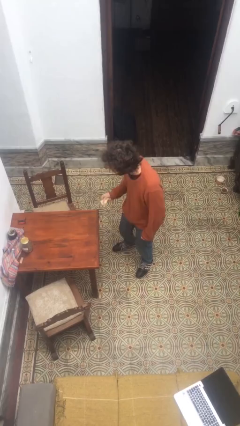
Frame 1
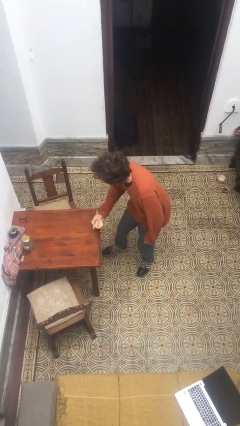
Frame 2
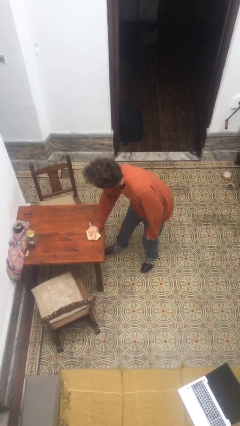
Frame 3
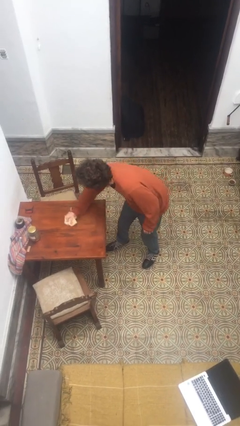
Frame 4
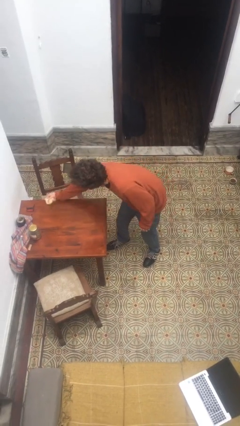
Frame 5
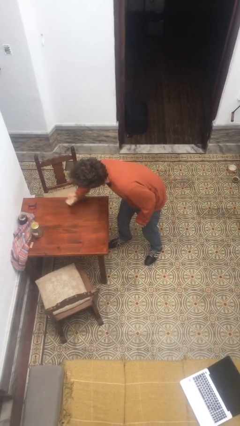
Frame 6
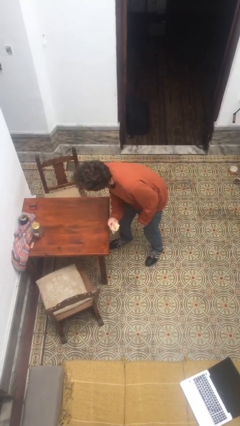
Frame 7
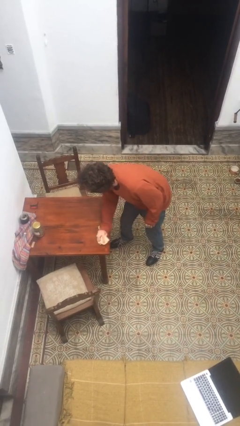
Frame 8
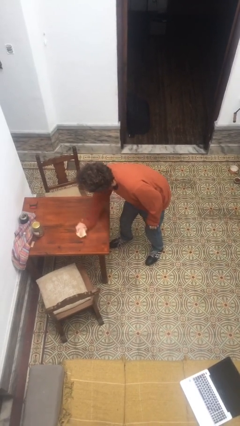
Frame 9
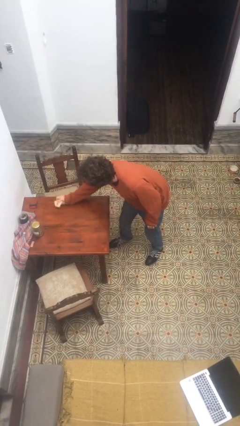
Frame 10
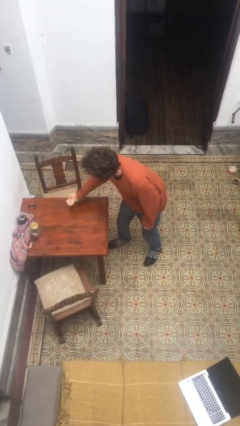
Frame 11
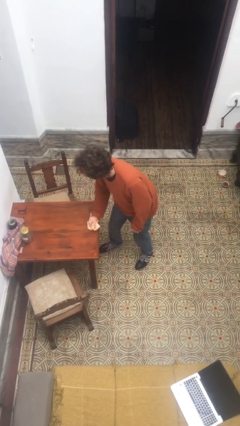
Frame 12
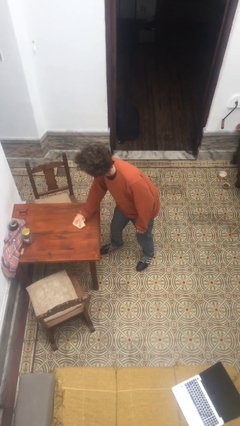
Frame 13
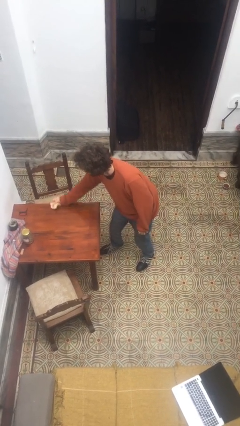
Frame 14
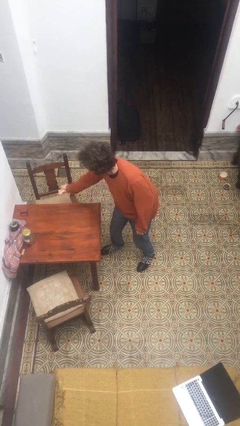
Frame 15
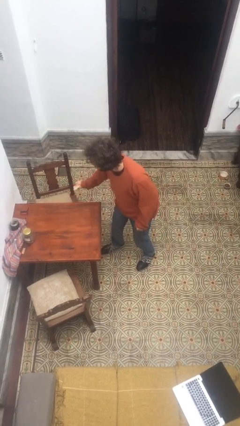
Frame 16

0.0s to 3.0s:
person cleans table with rag

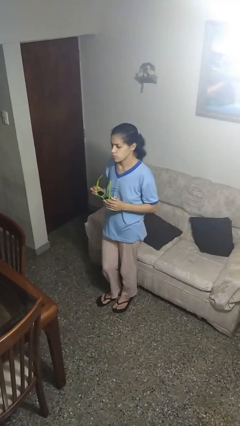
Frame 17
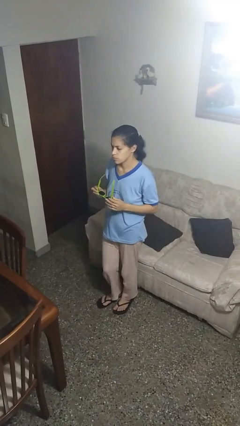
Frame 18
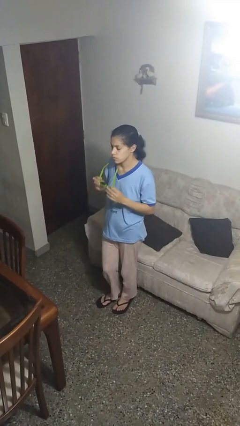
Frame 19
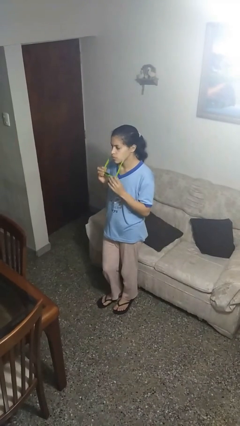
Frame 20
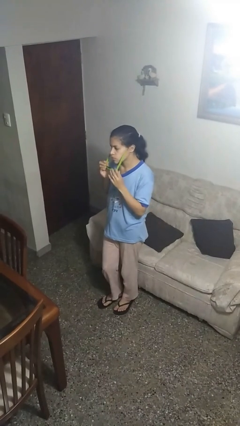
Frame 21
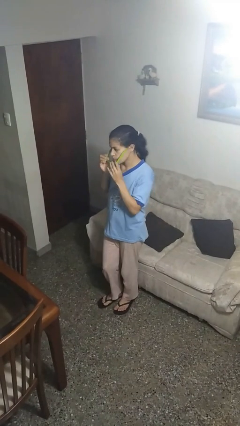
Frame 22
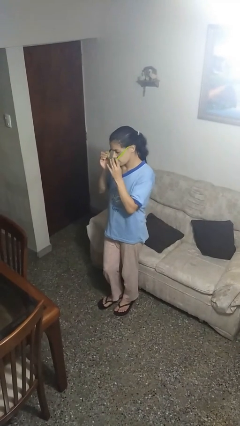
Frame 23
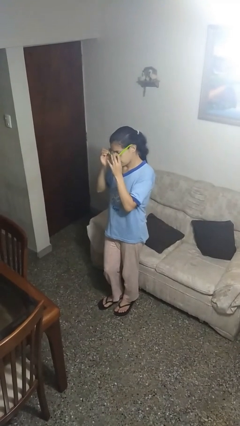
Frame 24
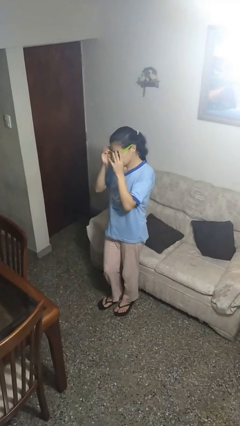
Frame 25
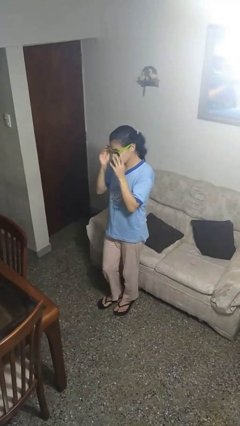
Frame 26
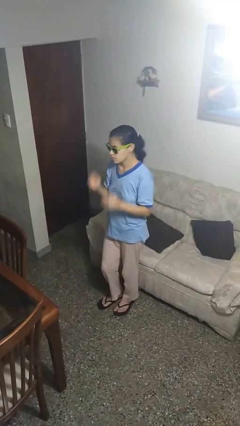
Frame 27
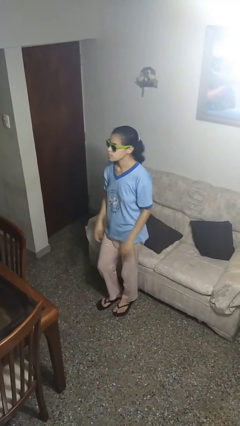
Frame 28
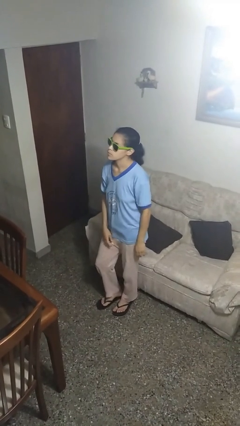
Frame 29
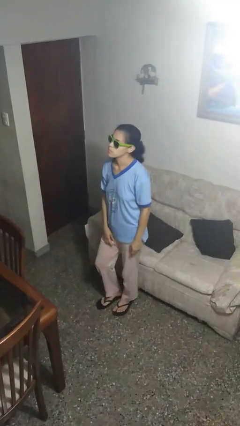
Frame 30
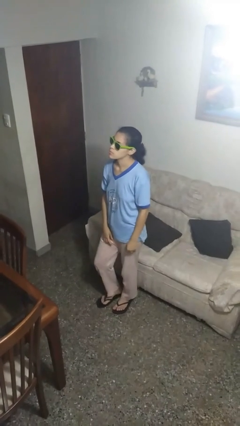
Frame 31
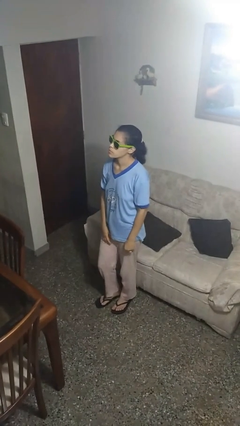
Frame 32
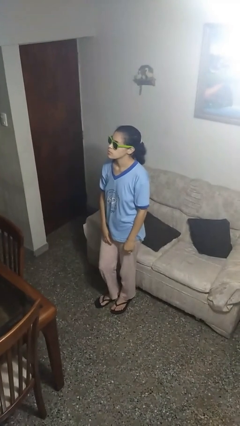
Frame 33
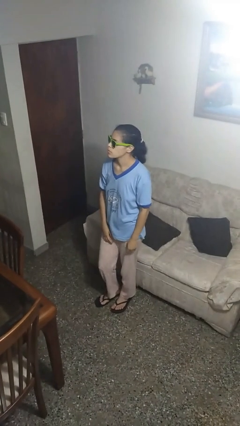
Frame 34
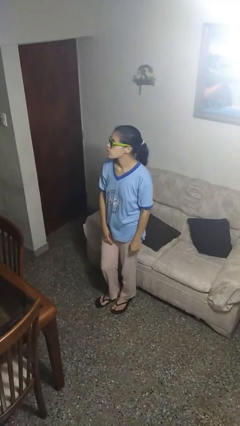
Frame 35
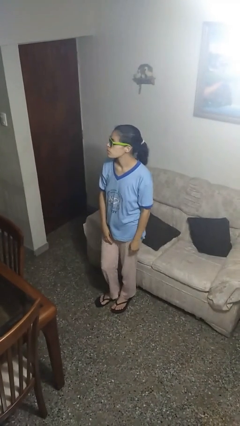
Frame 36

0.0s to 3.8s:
person puts on sunglasses

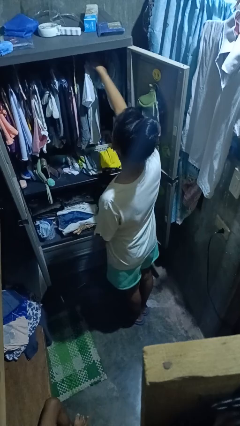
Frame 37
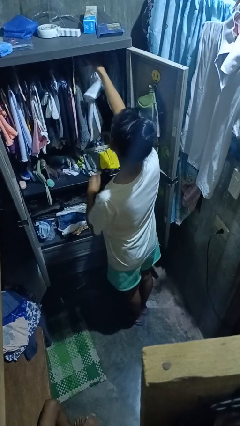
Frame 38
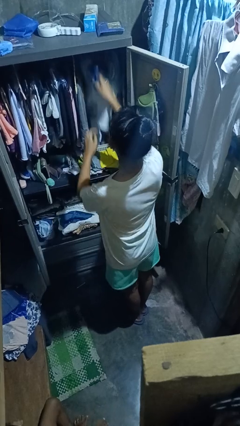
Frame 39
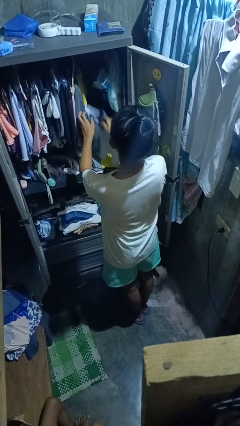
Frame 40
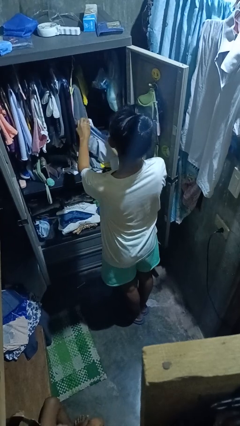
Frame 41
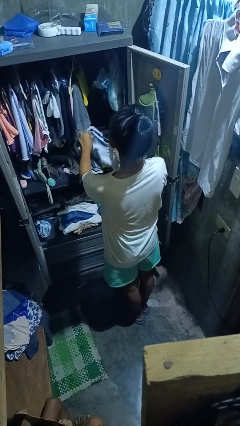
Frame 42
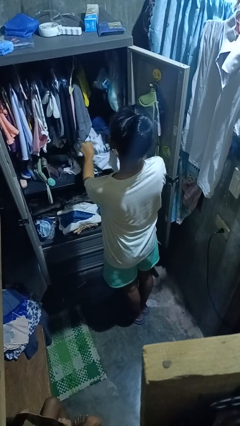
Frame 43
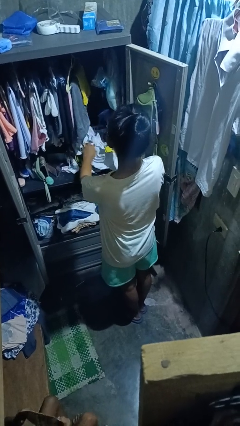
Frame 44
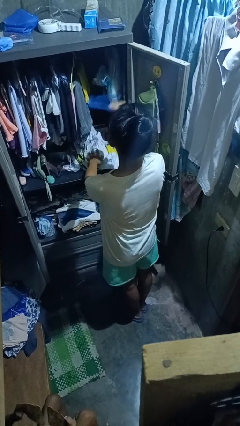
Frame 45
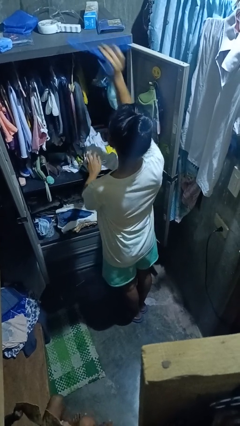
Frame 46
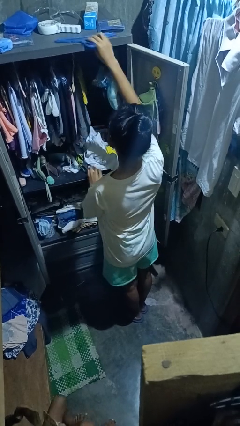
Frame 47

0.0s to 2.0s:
person takes clothes from closet

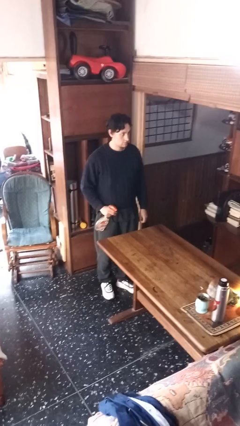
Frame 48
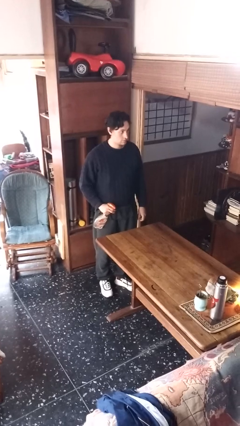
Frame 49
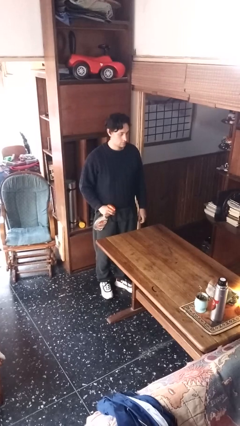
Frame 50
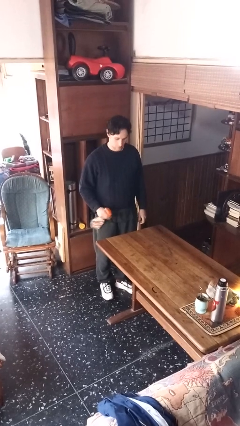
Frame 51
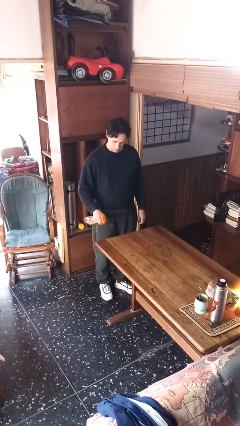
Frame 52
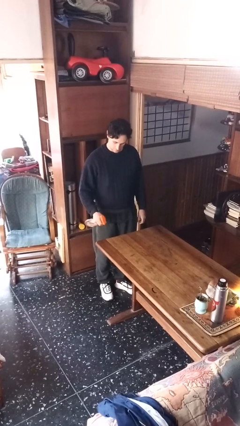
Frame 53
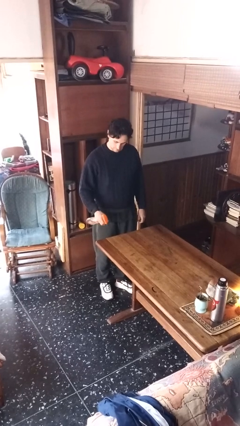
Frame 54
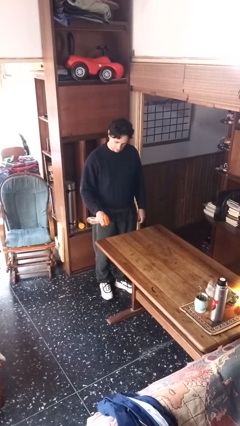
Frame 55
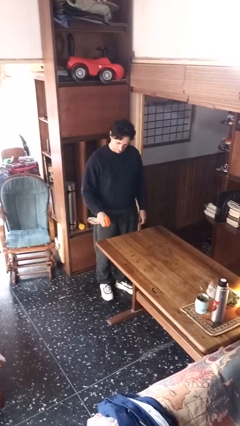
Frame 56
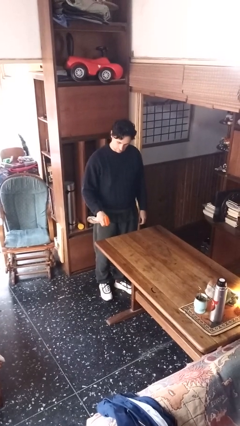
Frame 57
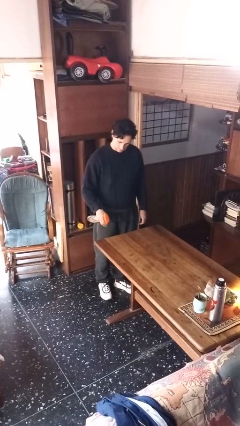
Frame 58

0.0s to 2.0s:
person sprays from bottle

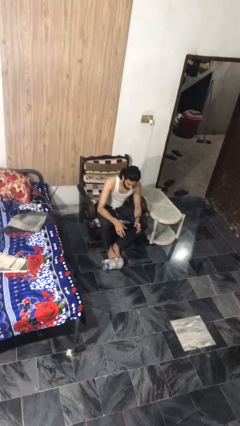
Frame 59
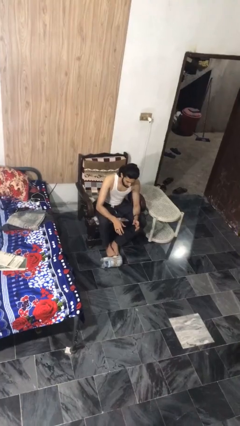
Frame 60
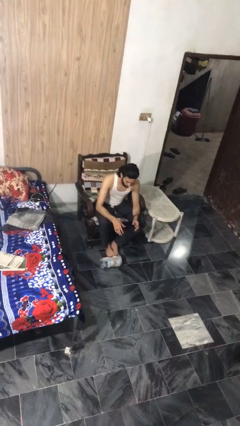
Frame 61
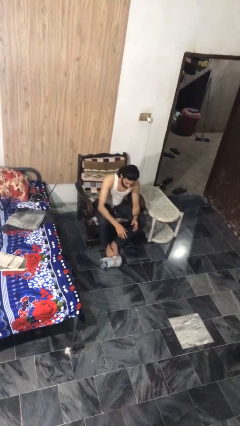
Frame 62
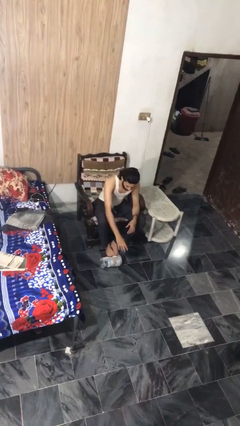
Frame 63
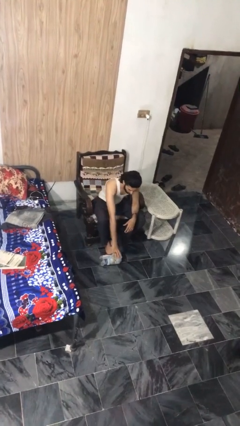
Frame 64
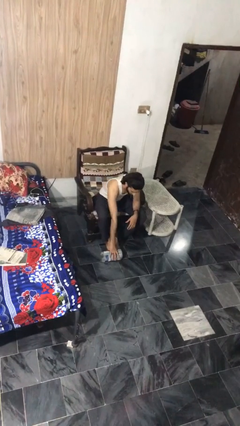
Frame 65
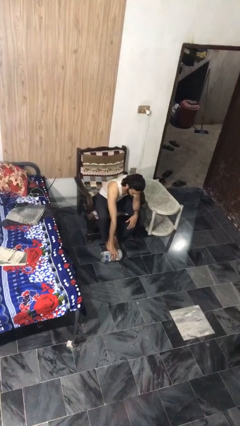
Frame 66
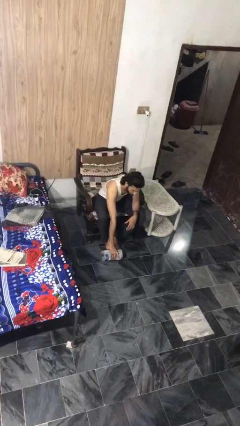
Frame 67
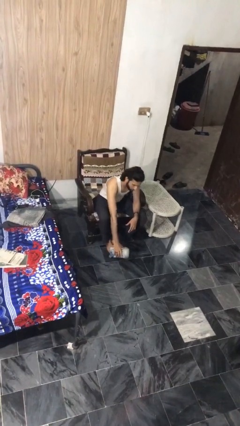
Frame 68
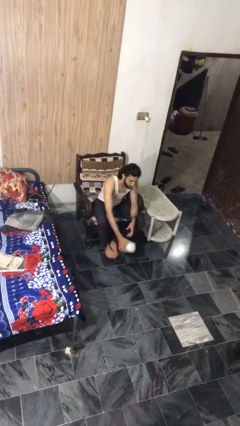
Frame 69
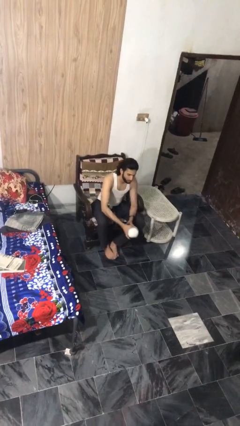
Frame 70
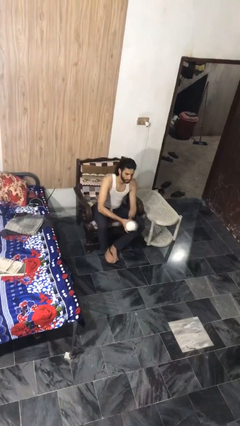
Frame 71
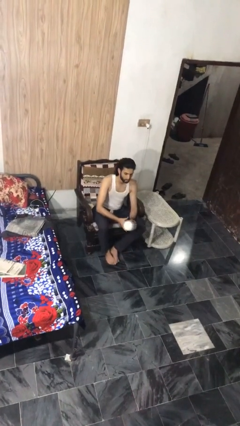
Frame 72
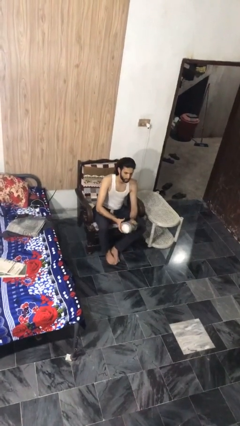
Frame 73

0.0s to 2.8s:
person picks up object from floor

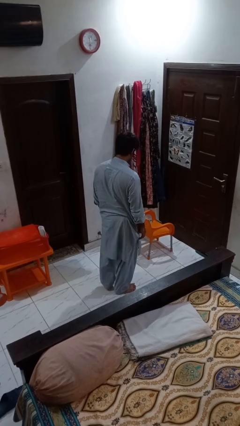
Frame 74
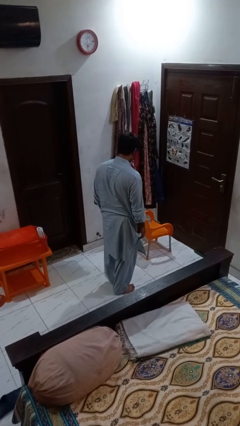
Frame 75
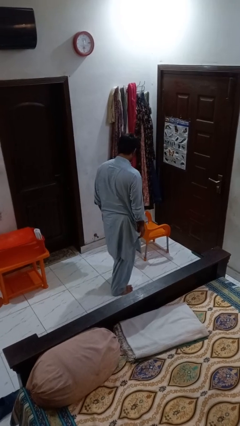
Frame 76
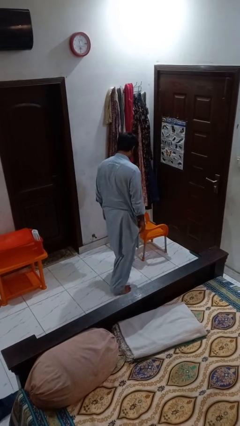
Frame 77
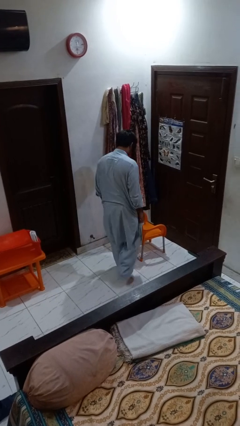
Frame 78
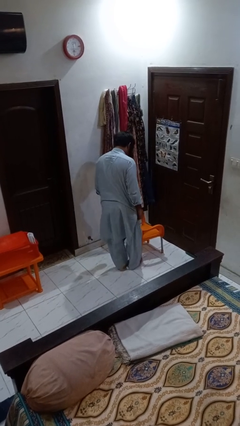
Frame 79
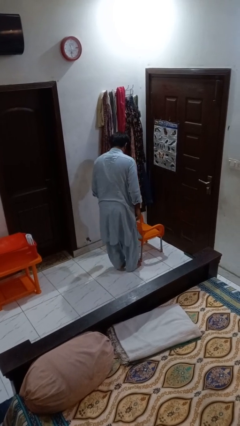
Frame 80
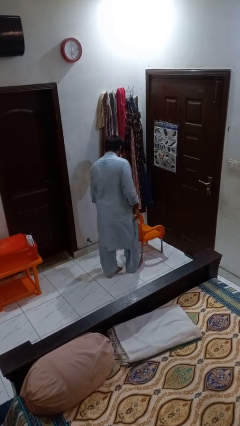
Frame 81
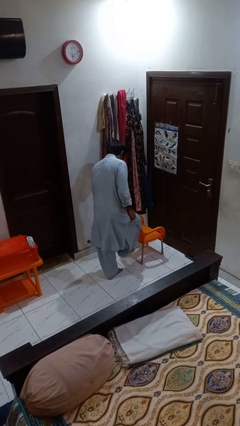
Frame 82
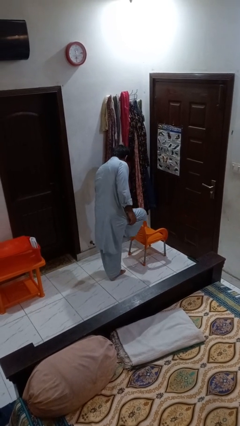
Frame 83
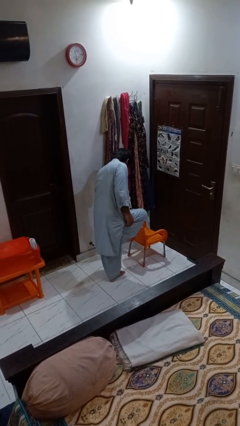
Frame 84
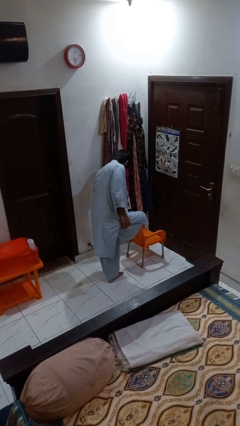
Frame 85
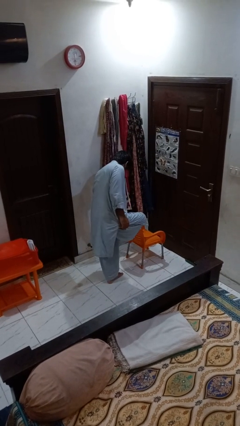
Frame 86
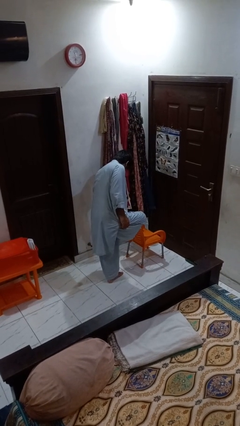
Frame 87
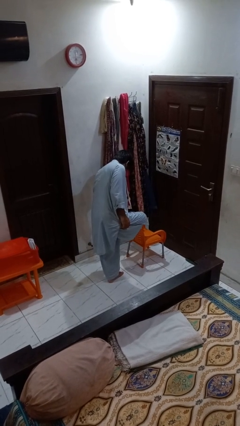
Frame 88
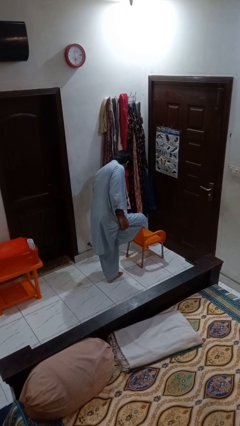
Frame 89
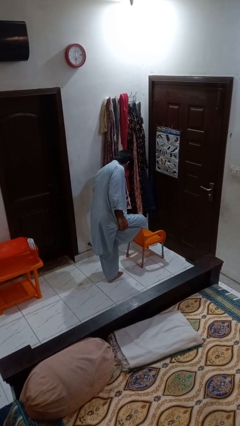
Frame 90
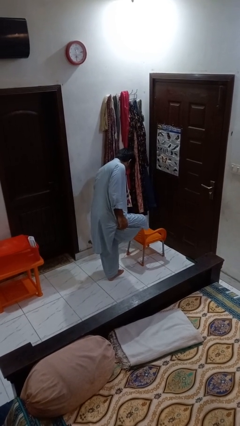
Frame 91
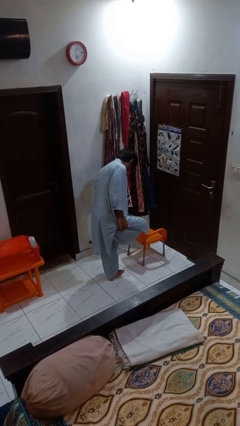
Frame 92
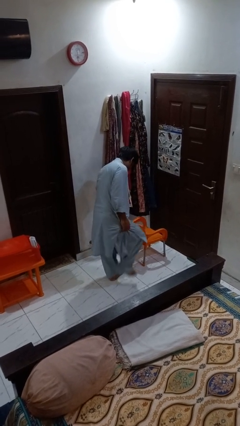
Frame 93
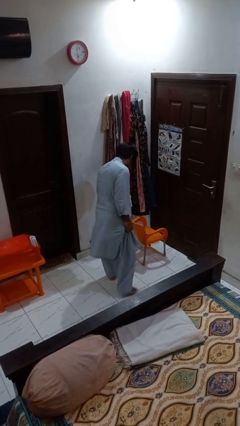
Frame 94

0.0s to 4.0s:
person stubs toe
